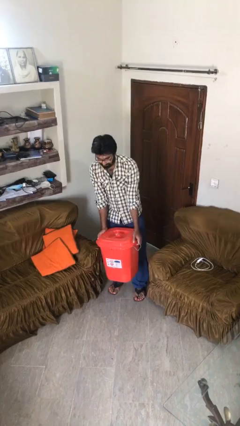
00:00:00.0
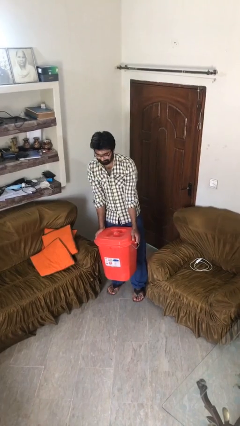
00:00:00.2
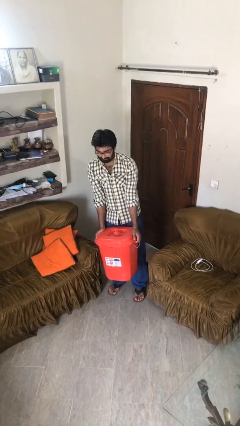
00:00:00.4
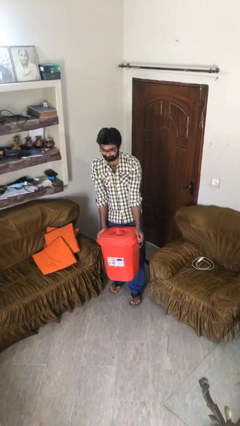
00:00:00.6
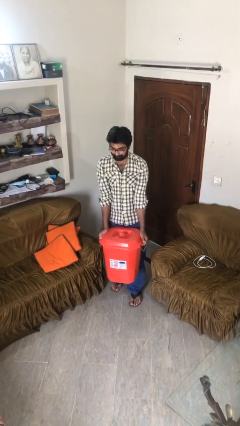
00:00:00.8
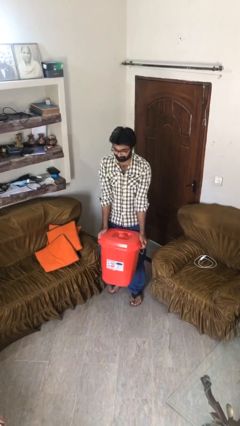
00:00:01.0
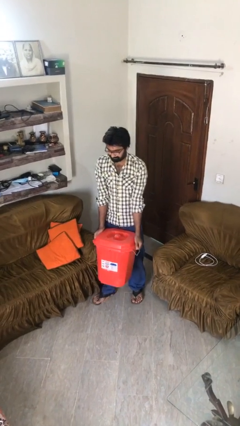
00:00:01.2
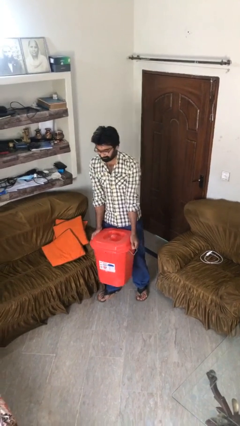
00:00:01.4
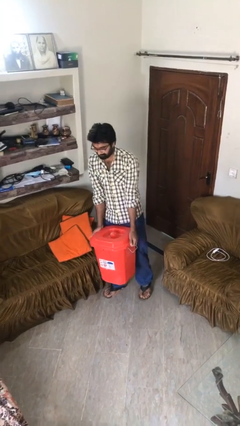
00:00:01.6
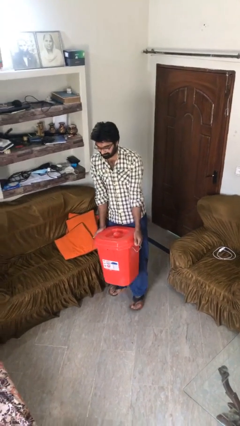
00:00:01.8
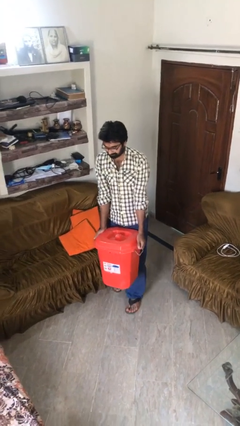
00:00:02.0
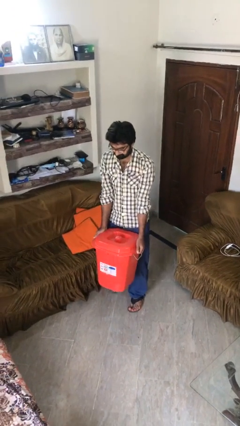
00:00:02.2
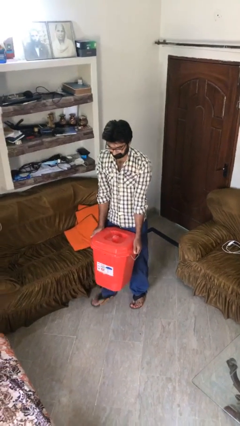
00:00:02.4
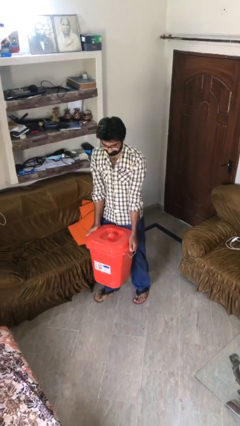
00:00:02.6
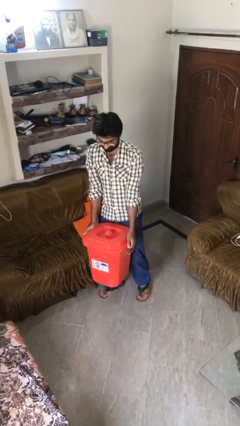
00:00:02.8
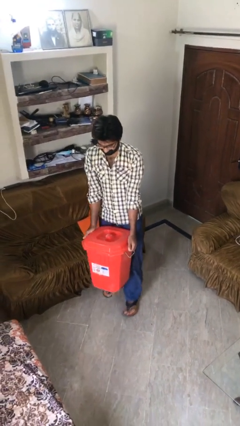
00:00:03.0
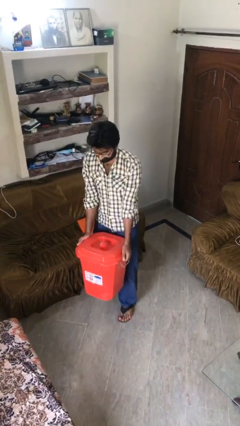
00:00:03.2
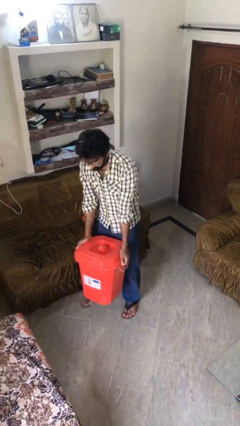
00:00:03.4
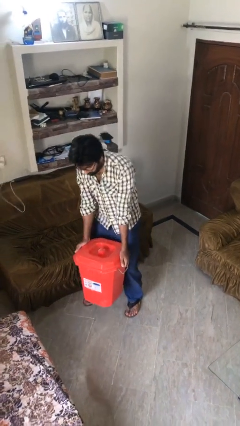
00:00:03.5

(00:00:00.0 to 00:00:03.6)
person carries heavy object

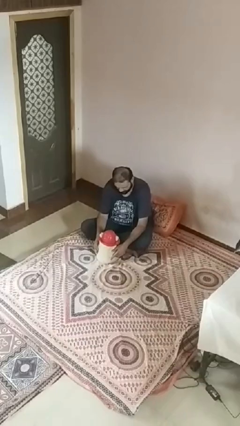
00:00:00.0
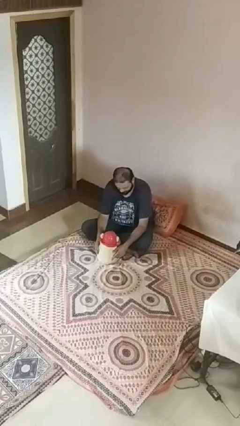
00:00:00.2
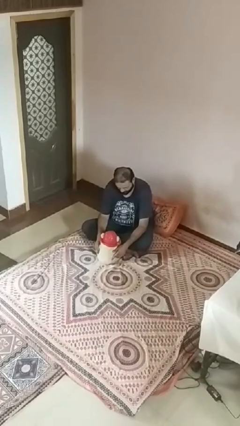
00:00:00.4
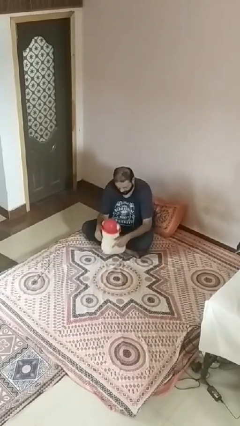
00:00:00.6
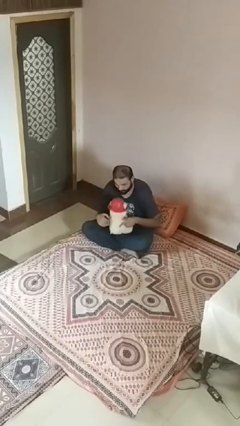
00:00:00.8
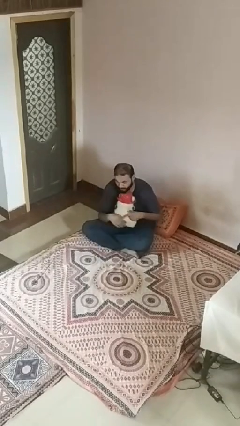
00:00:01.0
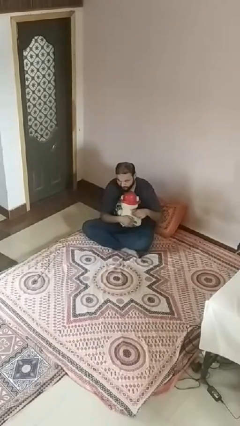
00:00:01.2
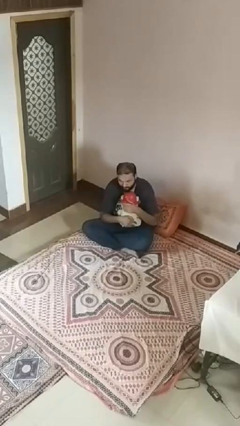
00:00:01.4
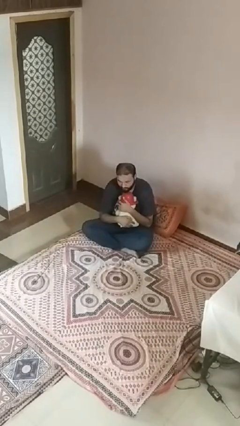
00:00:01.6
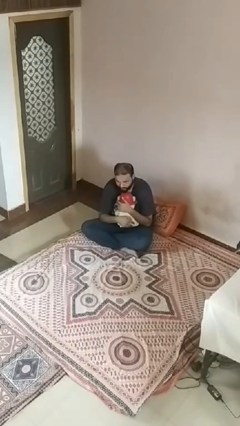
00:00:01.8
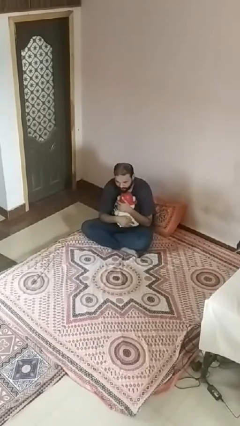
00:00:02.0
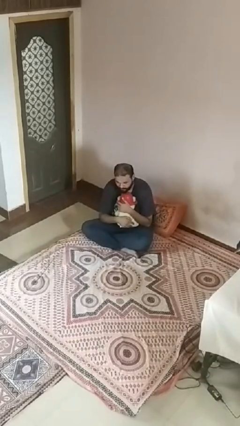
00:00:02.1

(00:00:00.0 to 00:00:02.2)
person hugs stuffed animal

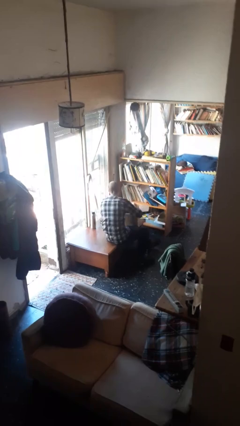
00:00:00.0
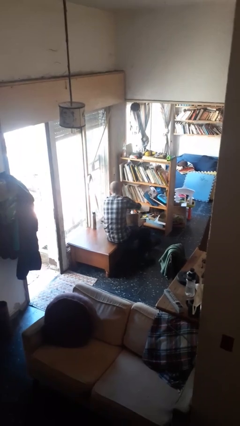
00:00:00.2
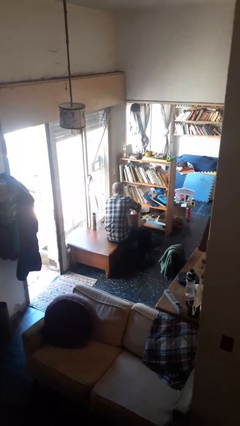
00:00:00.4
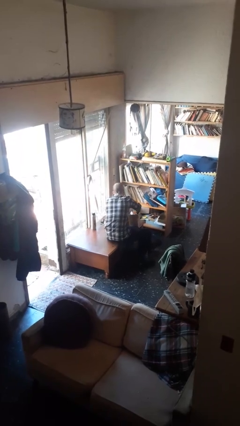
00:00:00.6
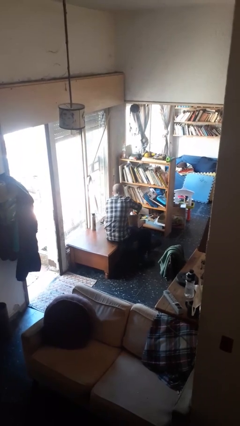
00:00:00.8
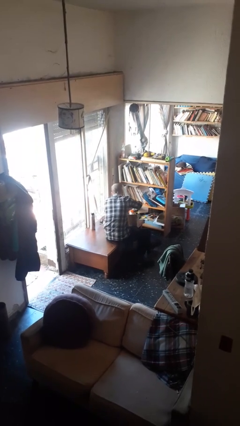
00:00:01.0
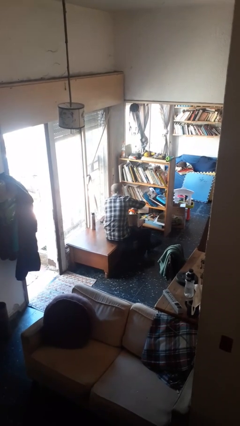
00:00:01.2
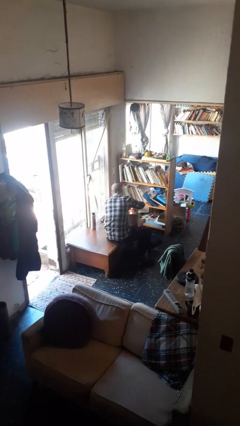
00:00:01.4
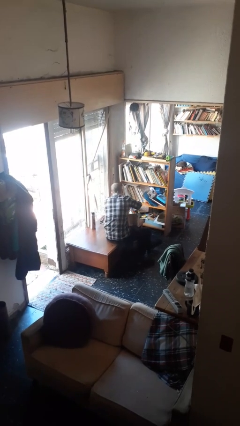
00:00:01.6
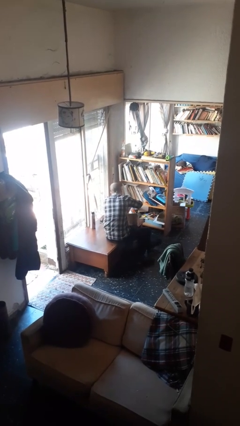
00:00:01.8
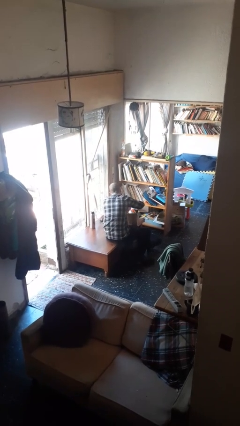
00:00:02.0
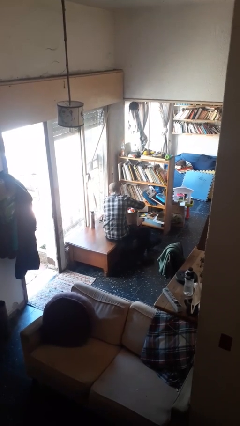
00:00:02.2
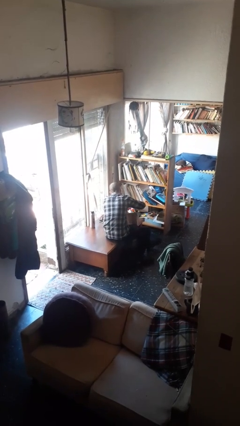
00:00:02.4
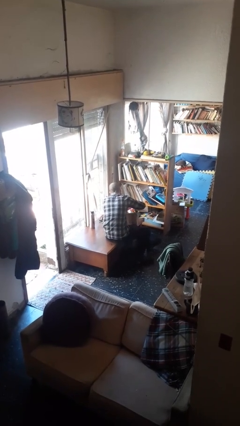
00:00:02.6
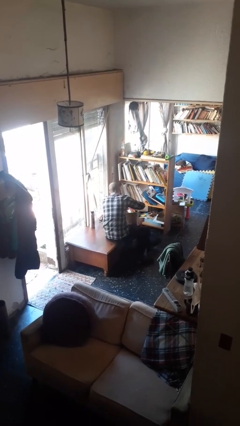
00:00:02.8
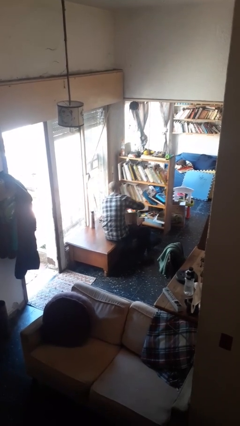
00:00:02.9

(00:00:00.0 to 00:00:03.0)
person searches in box

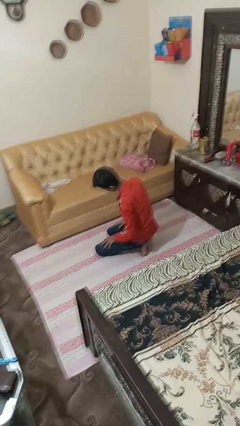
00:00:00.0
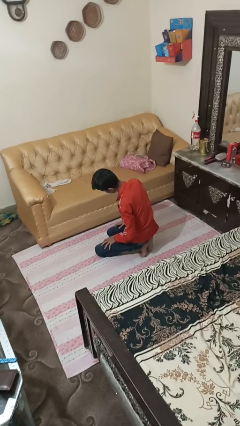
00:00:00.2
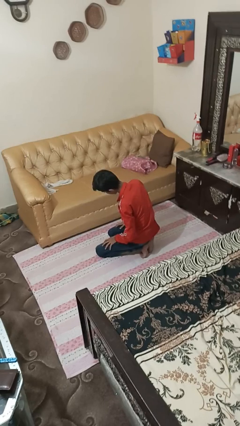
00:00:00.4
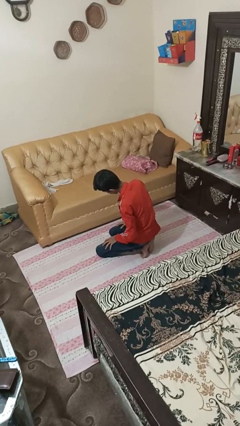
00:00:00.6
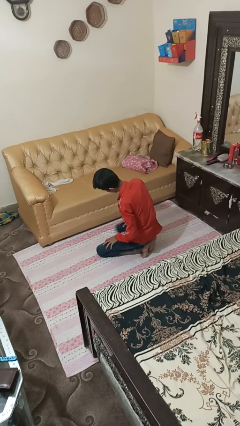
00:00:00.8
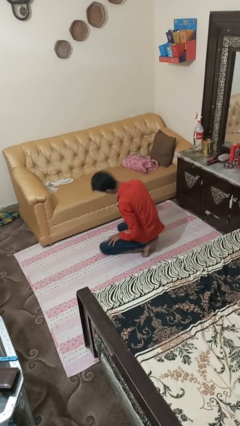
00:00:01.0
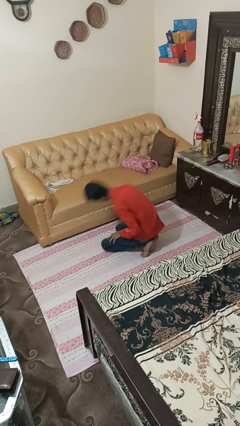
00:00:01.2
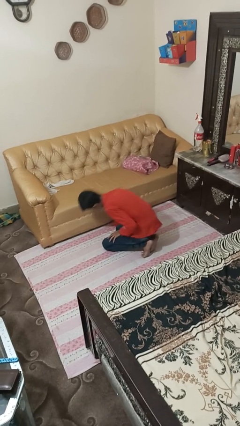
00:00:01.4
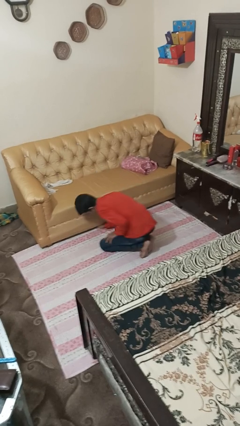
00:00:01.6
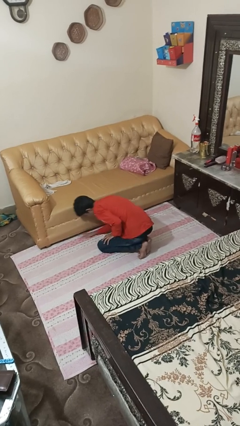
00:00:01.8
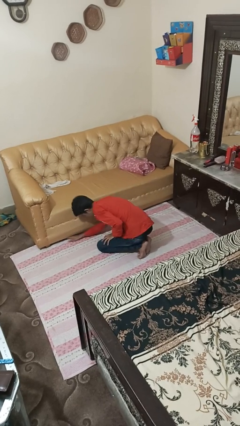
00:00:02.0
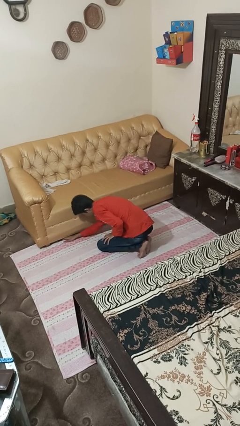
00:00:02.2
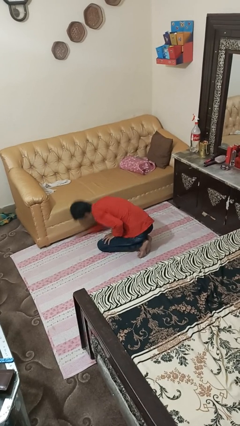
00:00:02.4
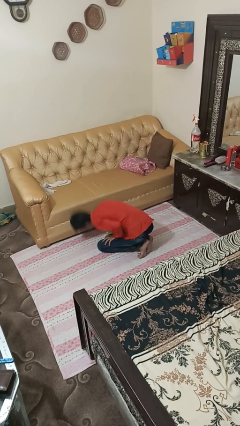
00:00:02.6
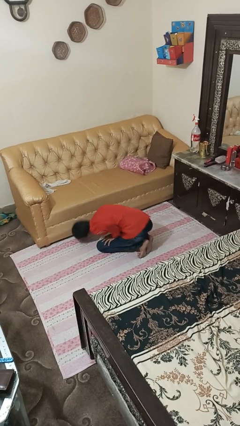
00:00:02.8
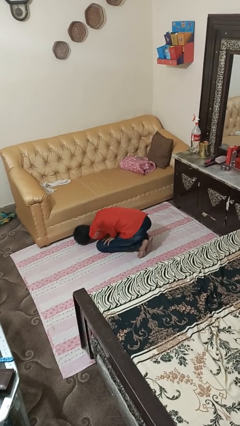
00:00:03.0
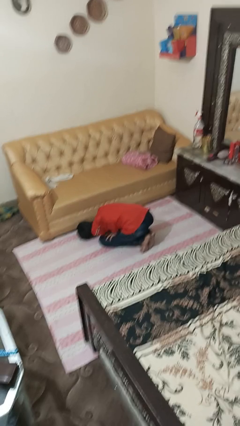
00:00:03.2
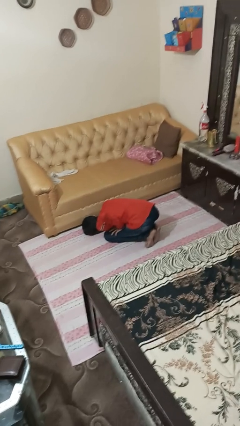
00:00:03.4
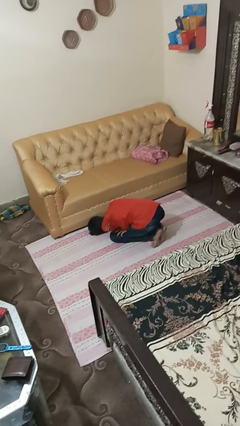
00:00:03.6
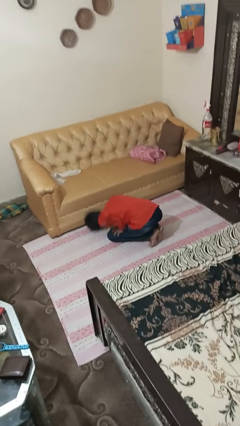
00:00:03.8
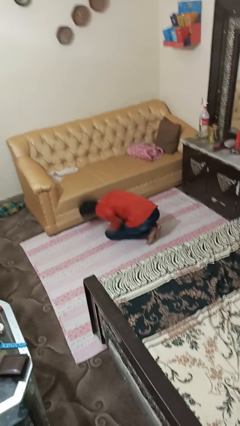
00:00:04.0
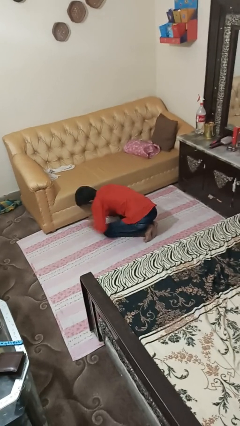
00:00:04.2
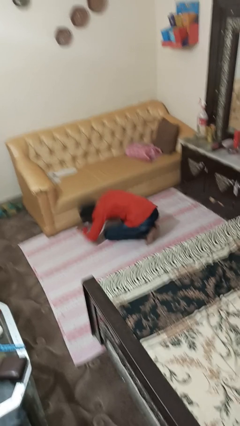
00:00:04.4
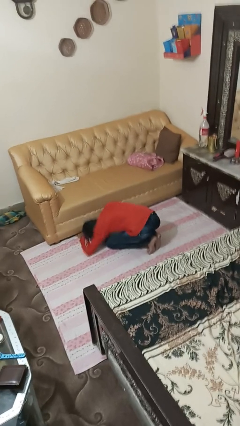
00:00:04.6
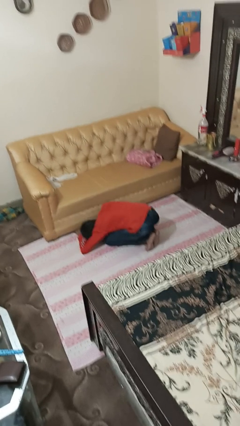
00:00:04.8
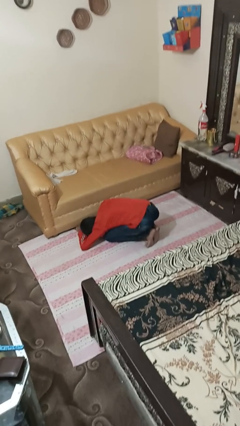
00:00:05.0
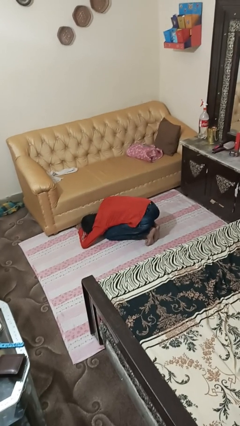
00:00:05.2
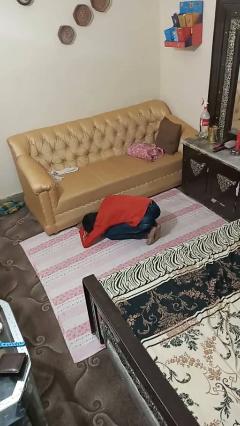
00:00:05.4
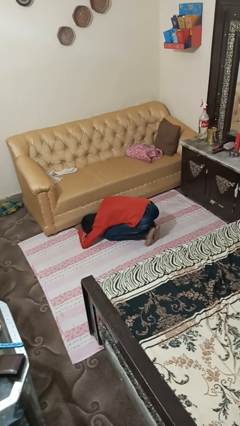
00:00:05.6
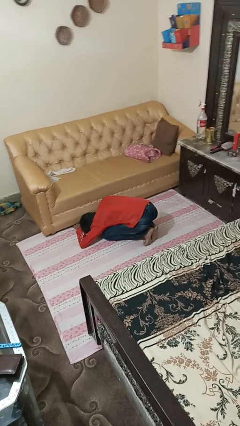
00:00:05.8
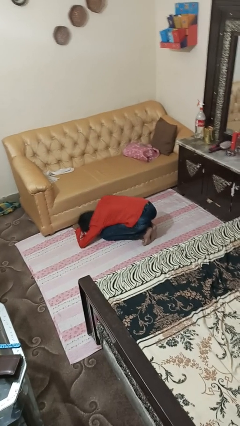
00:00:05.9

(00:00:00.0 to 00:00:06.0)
person searches under couch

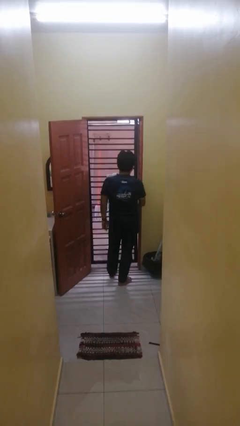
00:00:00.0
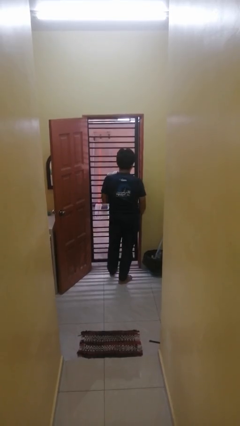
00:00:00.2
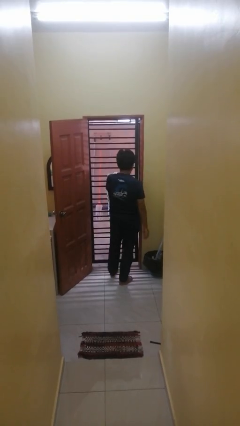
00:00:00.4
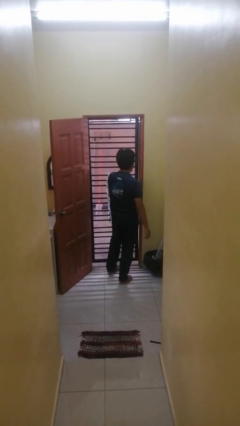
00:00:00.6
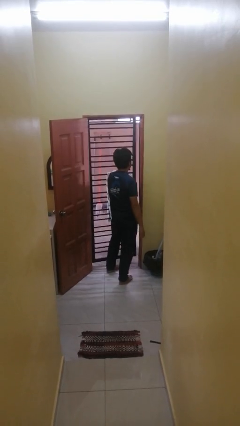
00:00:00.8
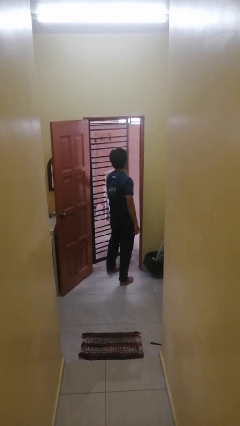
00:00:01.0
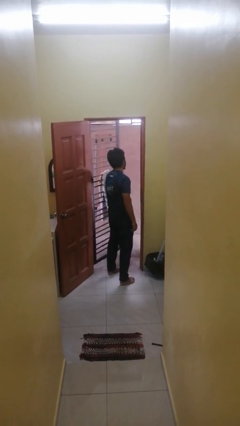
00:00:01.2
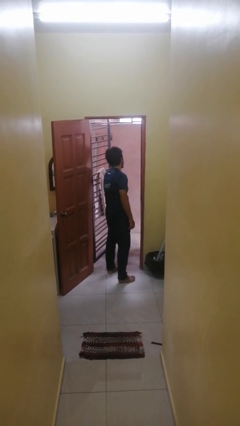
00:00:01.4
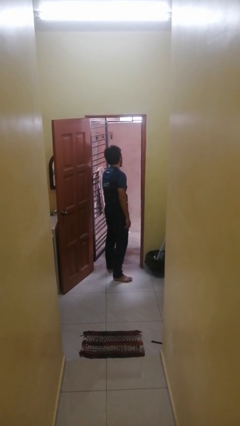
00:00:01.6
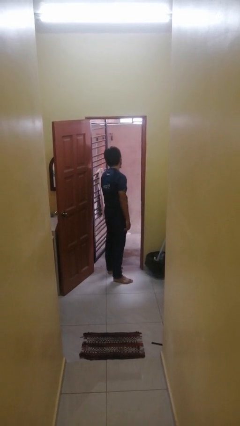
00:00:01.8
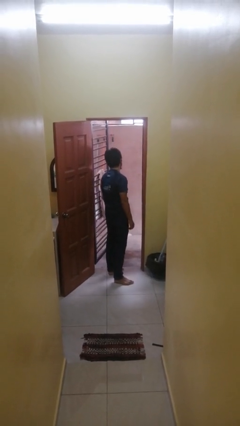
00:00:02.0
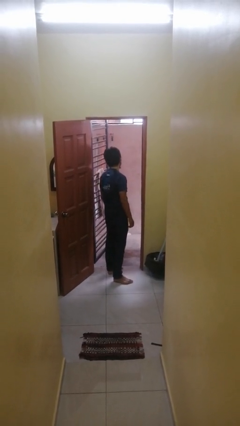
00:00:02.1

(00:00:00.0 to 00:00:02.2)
person opens gate

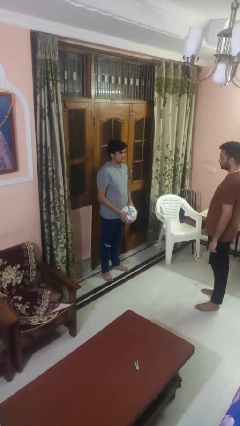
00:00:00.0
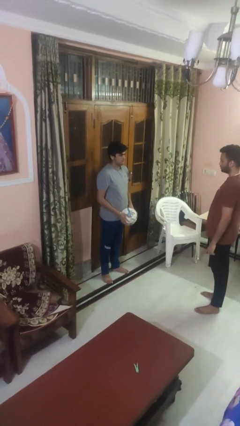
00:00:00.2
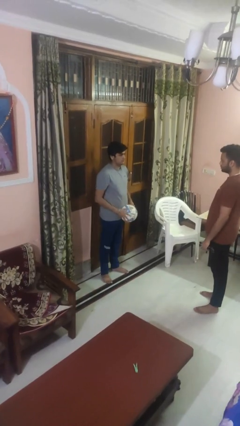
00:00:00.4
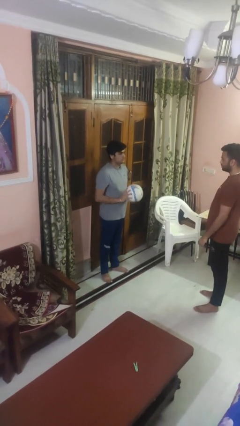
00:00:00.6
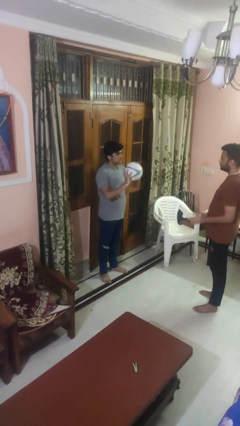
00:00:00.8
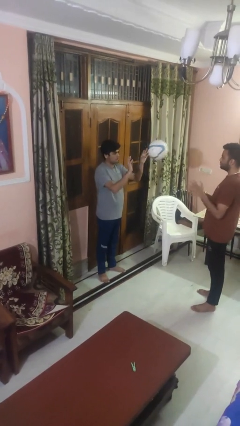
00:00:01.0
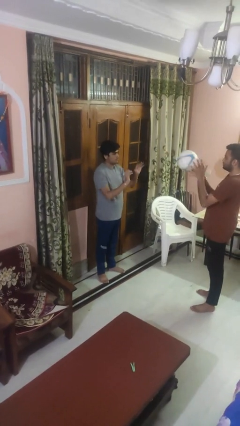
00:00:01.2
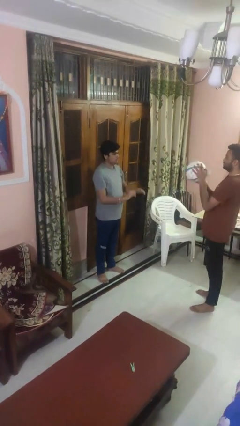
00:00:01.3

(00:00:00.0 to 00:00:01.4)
person throws object to person
